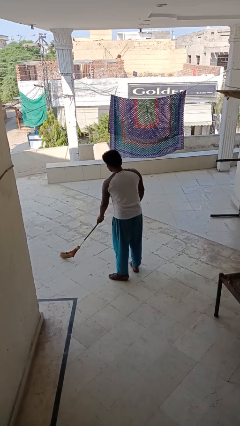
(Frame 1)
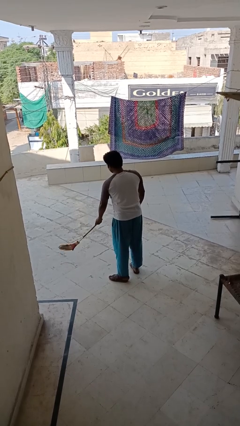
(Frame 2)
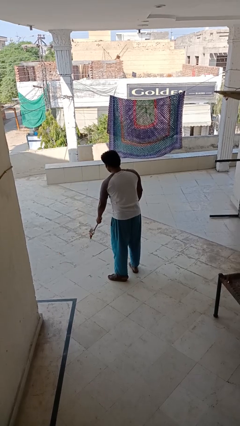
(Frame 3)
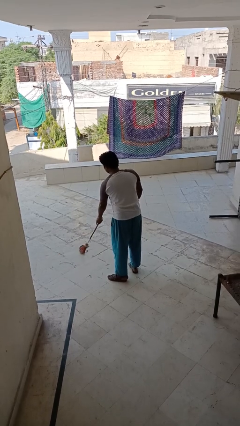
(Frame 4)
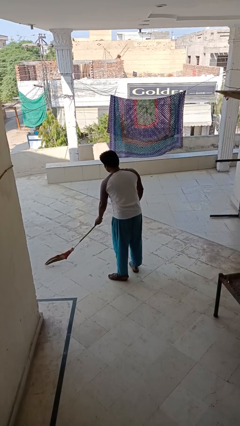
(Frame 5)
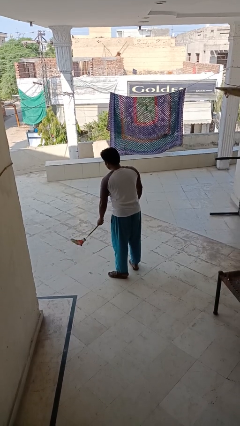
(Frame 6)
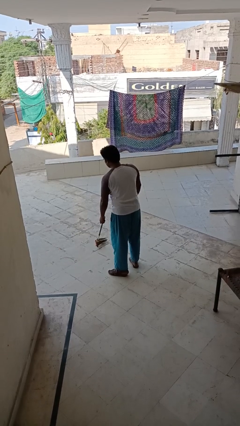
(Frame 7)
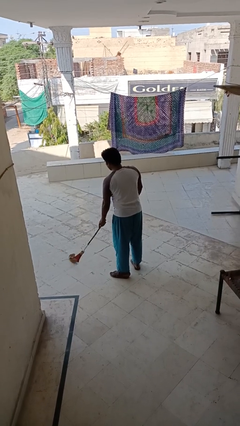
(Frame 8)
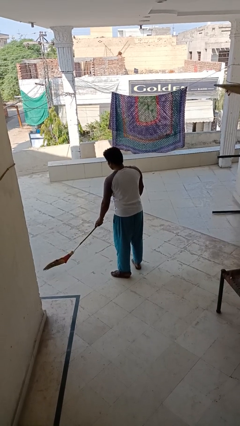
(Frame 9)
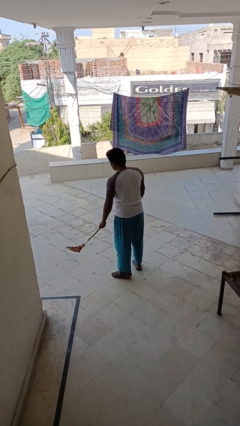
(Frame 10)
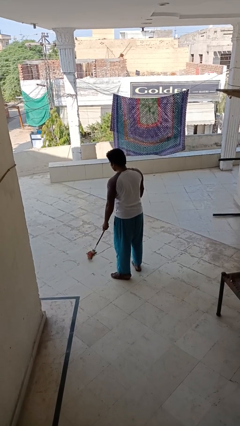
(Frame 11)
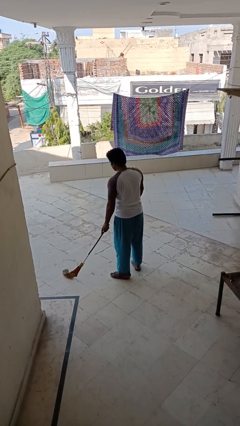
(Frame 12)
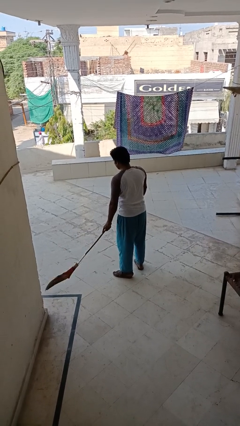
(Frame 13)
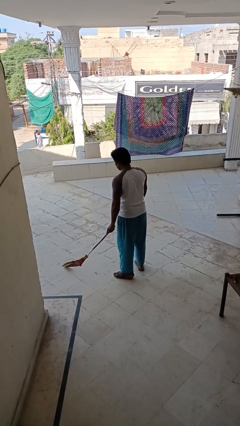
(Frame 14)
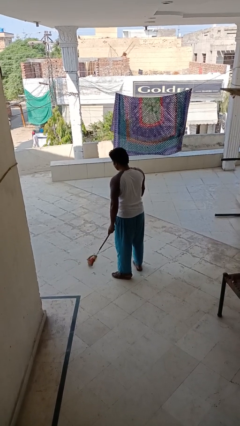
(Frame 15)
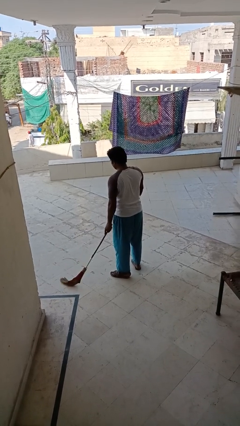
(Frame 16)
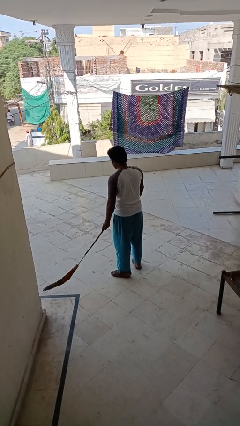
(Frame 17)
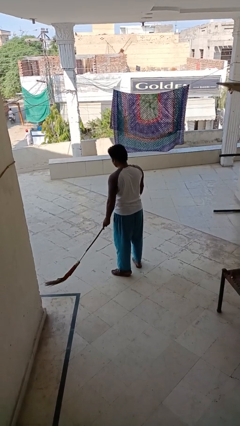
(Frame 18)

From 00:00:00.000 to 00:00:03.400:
person sweeps floor

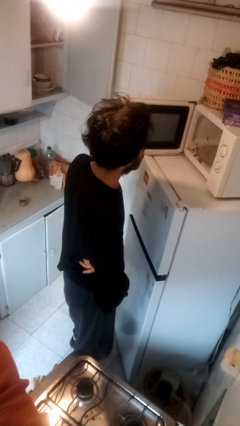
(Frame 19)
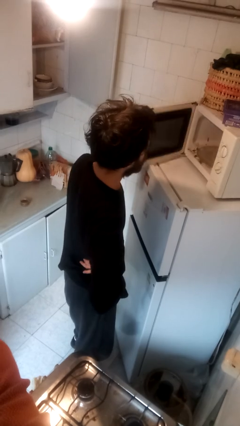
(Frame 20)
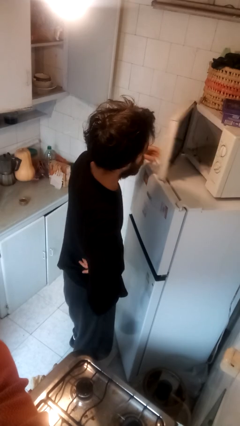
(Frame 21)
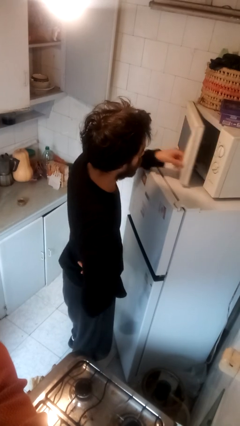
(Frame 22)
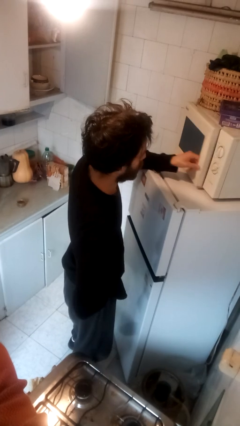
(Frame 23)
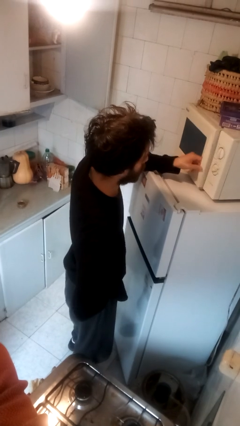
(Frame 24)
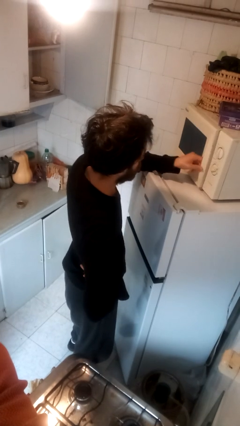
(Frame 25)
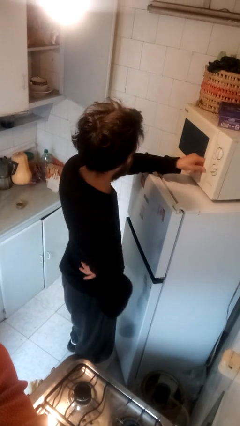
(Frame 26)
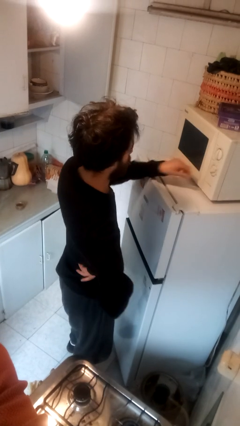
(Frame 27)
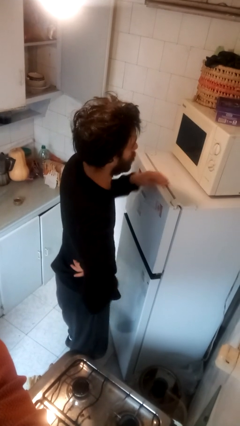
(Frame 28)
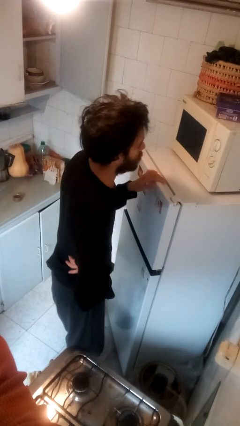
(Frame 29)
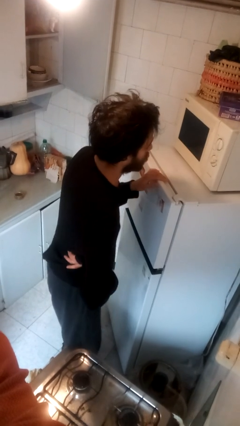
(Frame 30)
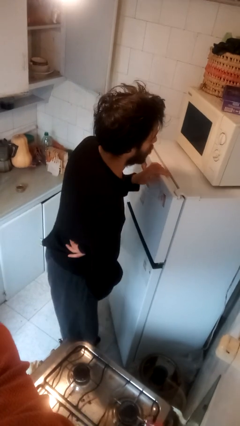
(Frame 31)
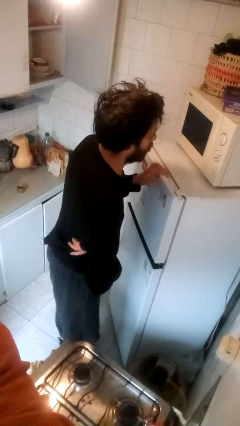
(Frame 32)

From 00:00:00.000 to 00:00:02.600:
person closes microwave

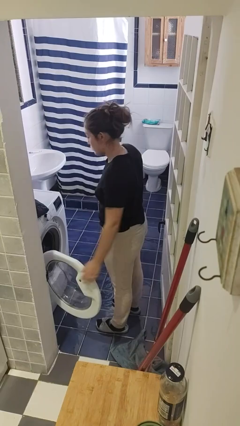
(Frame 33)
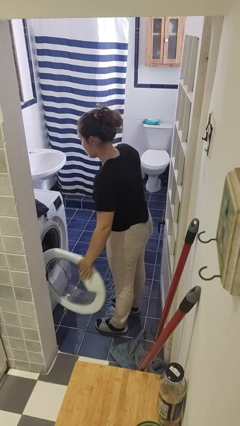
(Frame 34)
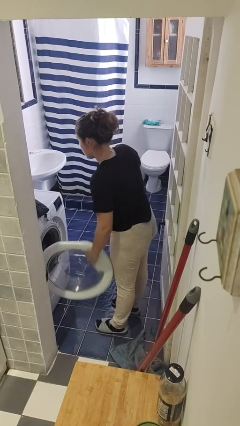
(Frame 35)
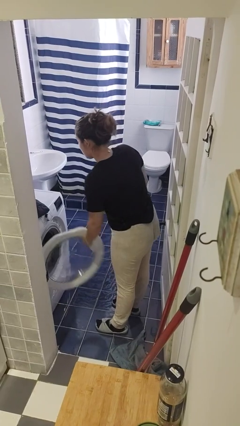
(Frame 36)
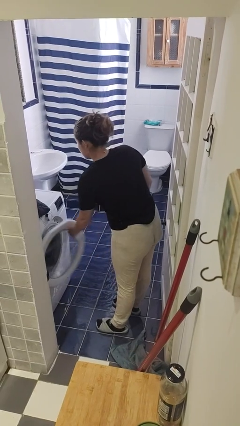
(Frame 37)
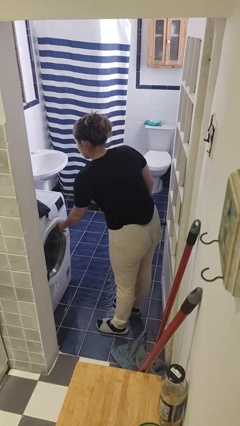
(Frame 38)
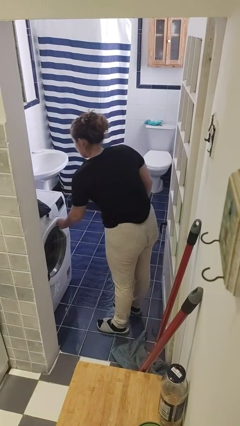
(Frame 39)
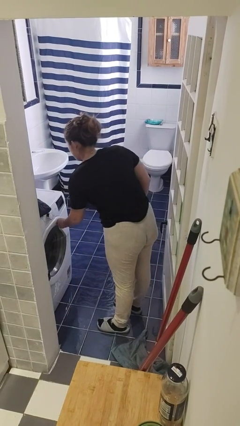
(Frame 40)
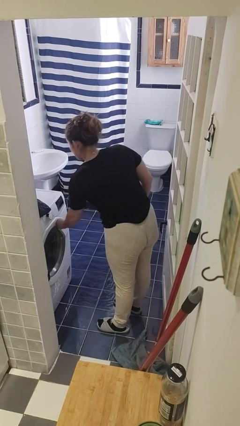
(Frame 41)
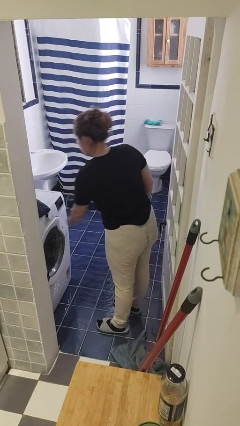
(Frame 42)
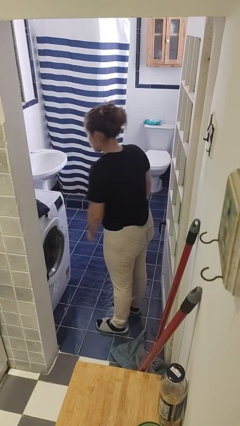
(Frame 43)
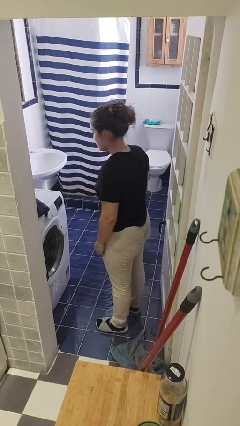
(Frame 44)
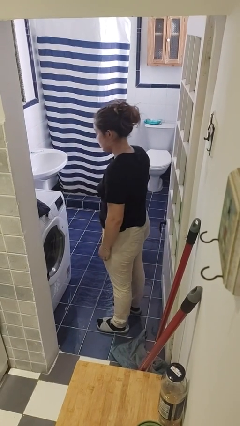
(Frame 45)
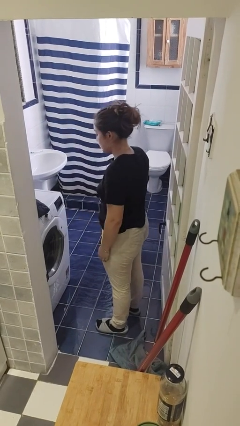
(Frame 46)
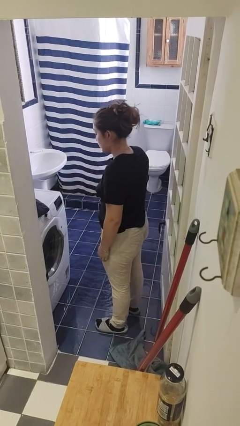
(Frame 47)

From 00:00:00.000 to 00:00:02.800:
person closes clothes washer

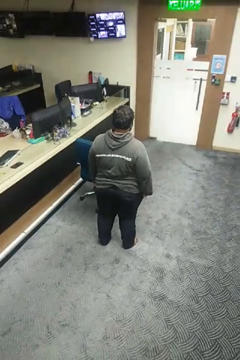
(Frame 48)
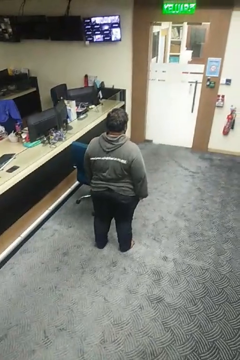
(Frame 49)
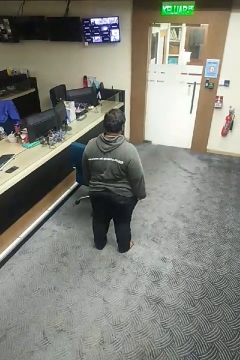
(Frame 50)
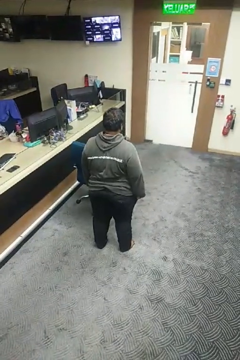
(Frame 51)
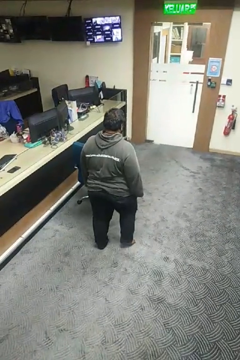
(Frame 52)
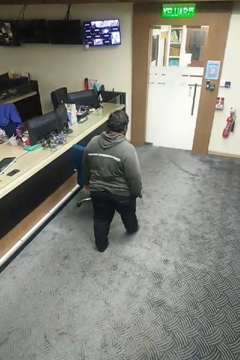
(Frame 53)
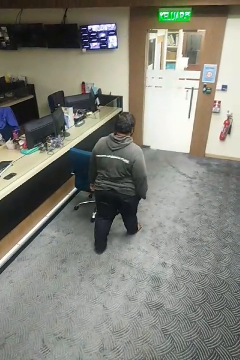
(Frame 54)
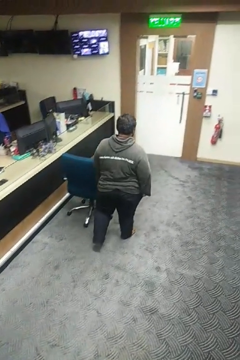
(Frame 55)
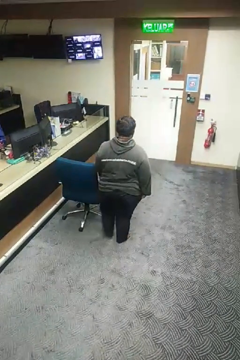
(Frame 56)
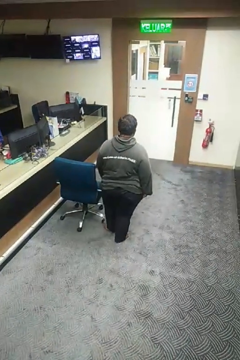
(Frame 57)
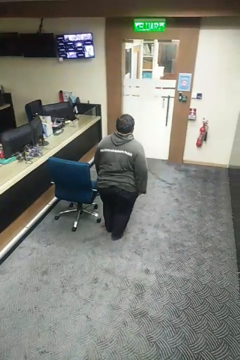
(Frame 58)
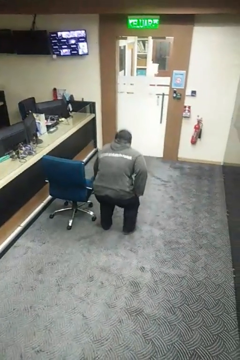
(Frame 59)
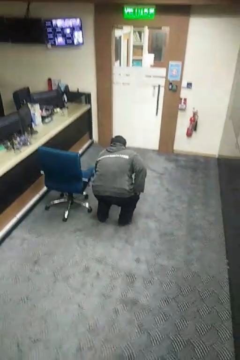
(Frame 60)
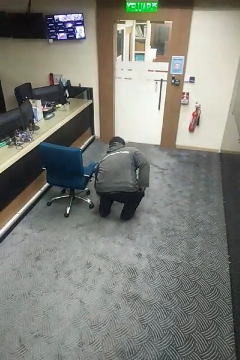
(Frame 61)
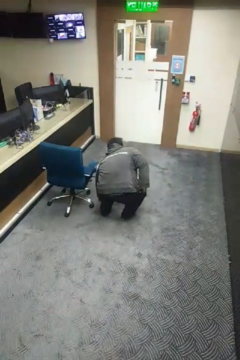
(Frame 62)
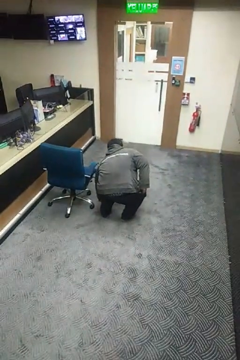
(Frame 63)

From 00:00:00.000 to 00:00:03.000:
person stubs toe

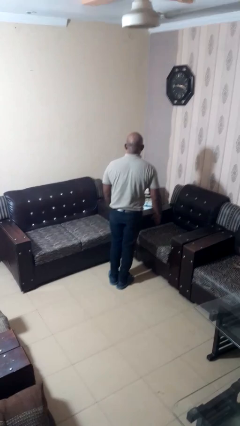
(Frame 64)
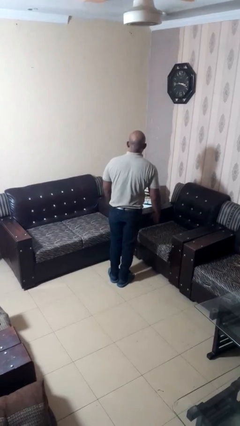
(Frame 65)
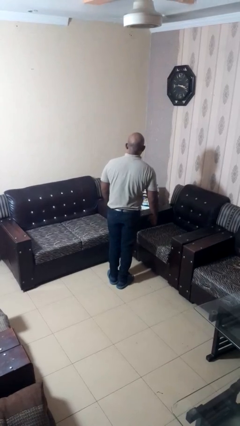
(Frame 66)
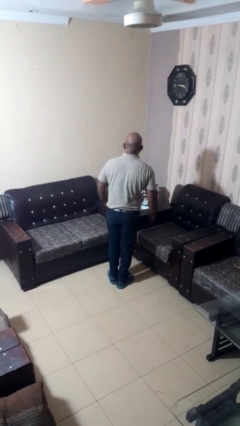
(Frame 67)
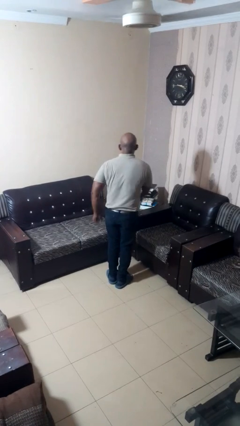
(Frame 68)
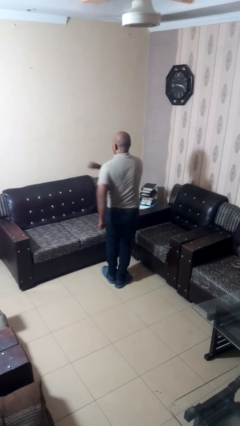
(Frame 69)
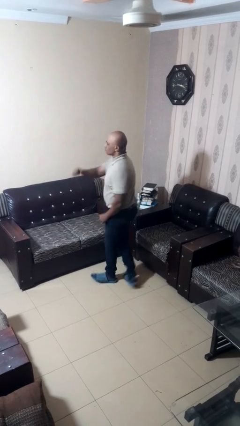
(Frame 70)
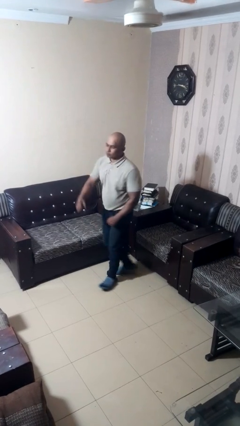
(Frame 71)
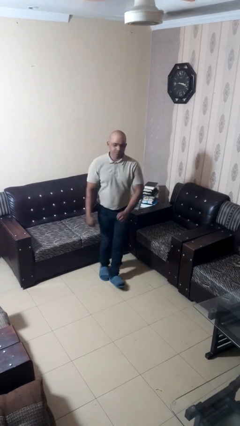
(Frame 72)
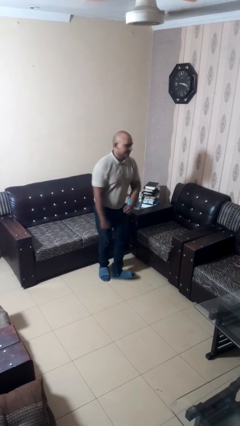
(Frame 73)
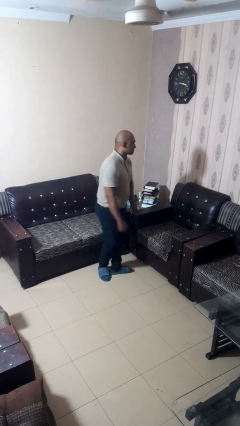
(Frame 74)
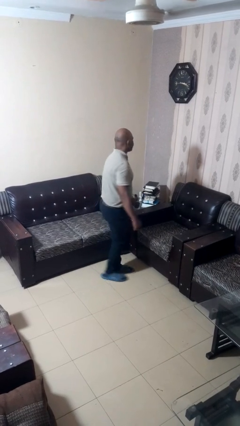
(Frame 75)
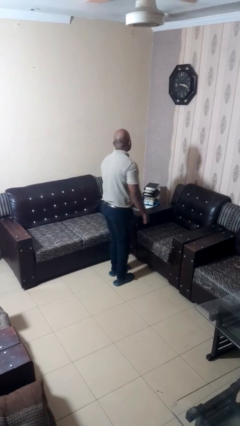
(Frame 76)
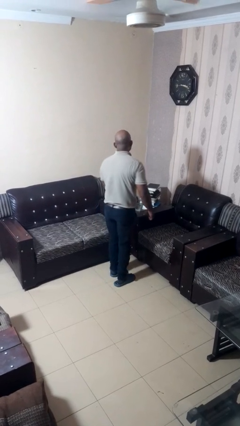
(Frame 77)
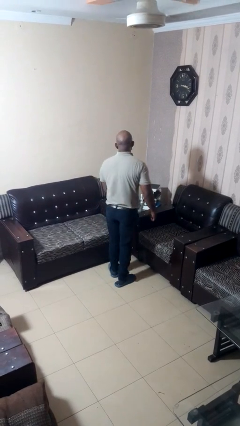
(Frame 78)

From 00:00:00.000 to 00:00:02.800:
person twirls

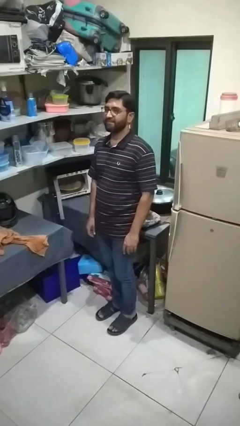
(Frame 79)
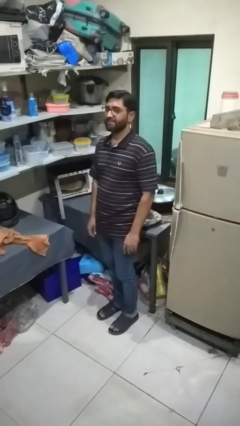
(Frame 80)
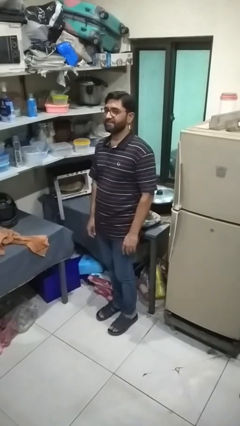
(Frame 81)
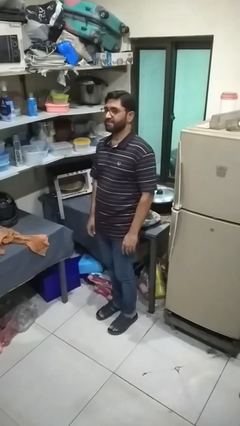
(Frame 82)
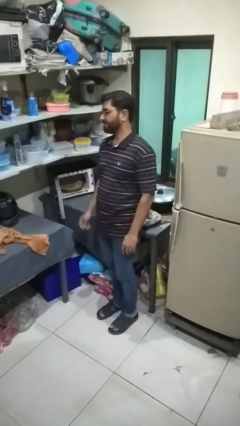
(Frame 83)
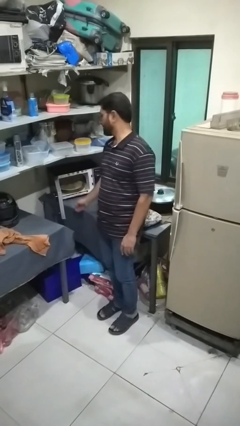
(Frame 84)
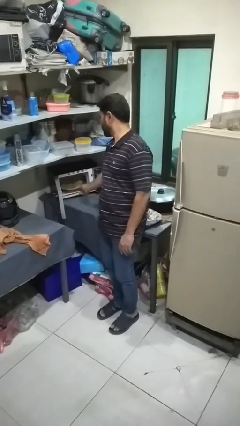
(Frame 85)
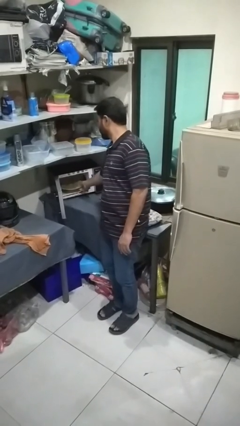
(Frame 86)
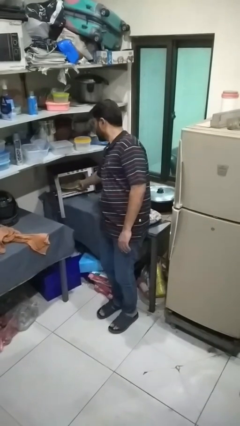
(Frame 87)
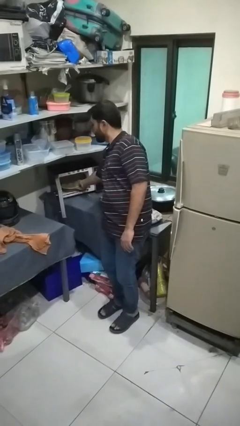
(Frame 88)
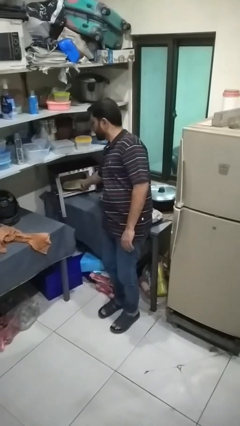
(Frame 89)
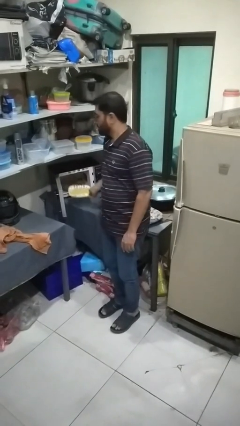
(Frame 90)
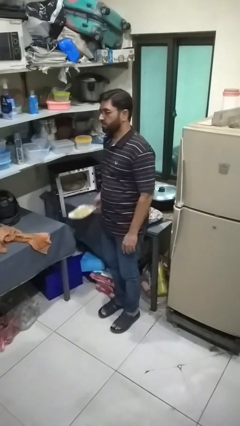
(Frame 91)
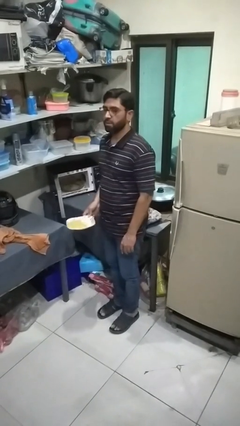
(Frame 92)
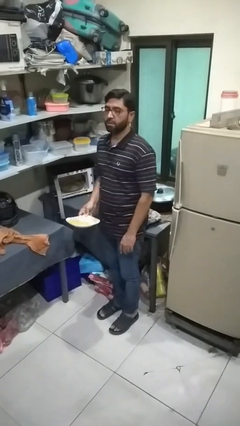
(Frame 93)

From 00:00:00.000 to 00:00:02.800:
person takes object from microwave

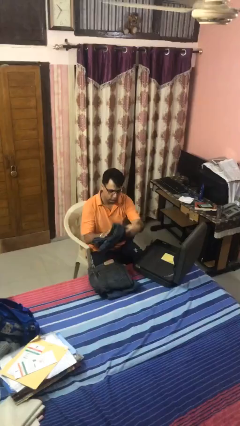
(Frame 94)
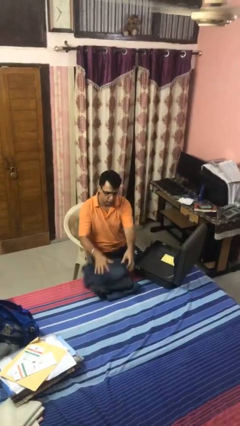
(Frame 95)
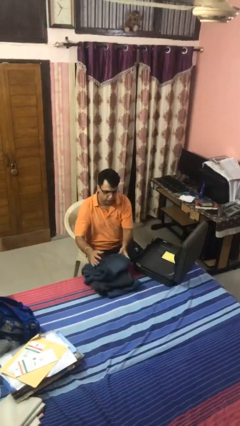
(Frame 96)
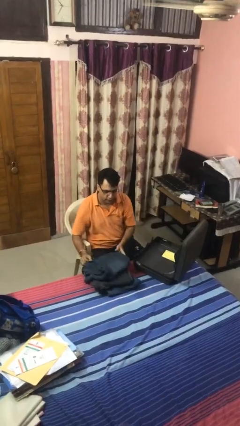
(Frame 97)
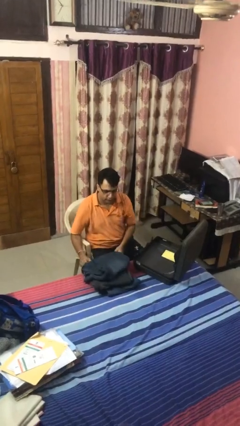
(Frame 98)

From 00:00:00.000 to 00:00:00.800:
person unloads clothes from suitcase
